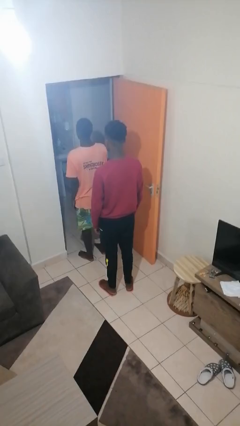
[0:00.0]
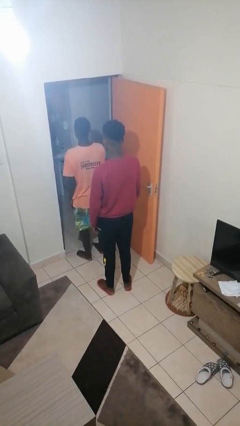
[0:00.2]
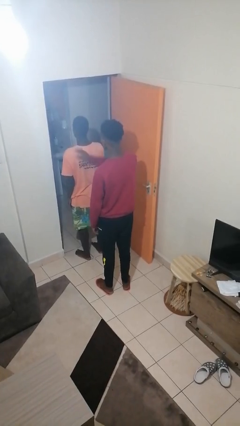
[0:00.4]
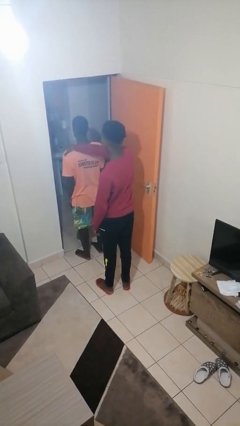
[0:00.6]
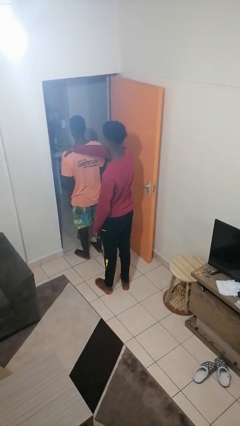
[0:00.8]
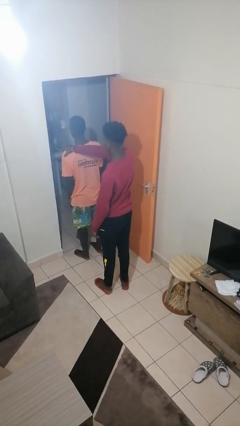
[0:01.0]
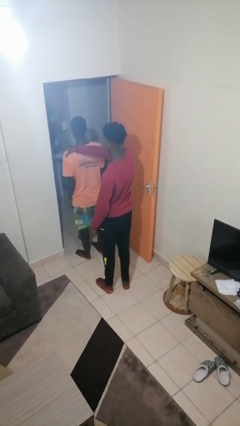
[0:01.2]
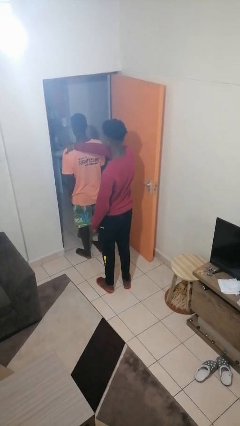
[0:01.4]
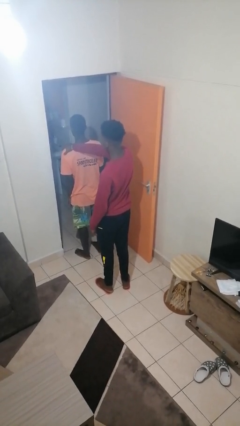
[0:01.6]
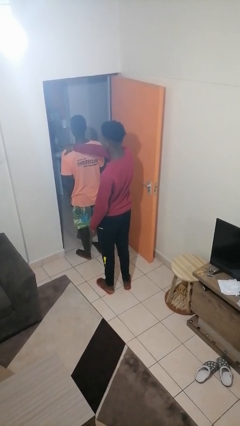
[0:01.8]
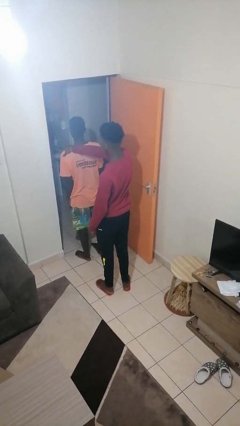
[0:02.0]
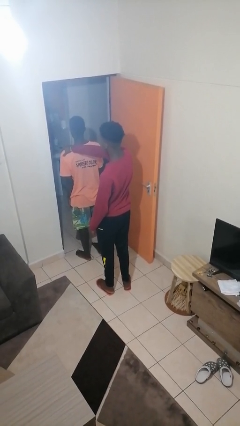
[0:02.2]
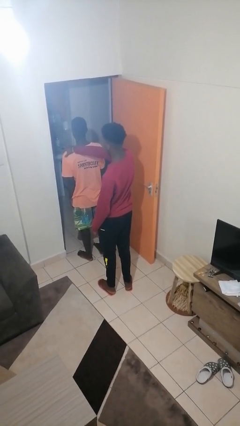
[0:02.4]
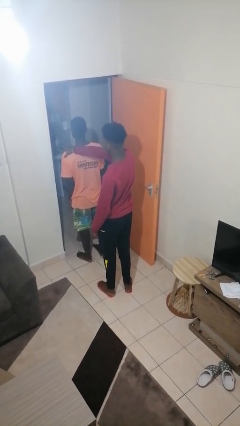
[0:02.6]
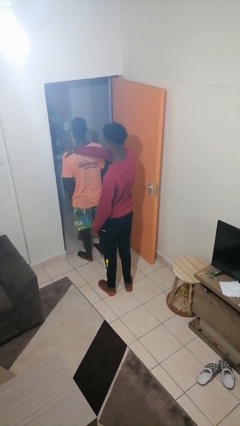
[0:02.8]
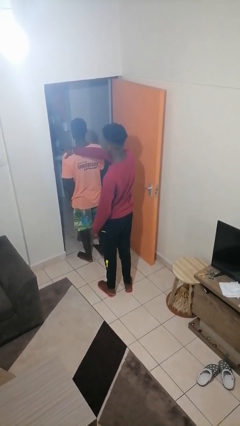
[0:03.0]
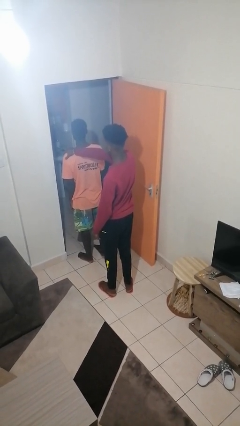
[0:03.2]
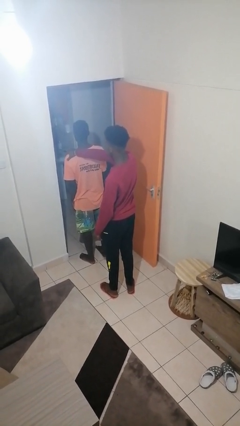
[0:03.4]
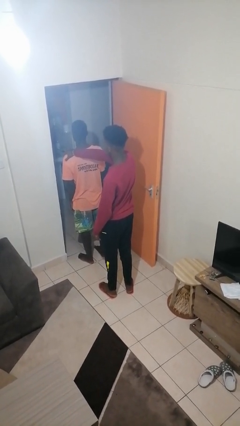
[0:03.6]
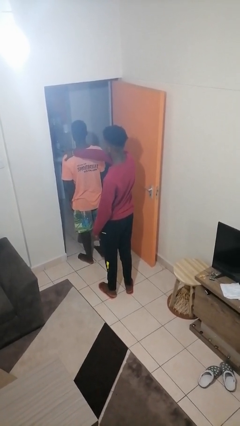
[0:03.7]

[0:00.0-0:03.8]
person grabs person by shoulder

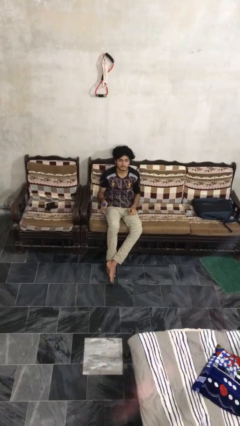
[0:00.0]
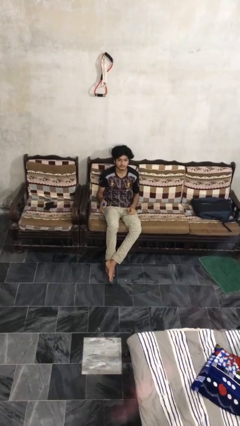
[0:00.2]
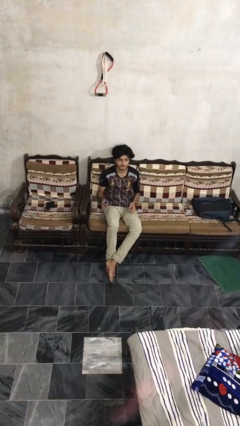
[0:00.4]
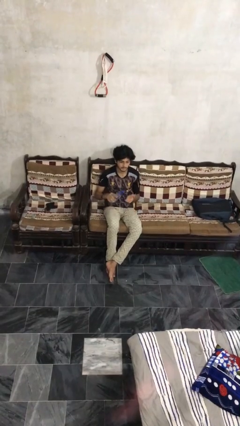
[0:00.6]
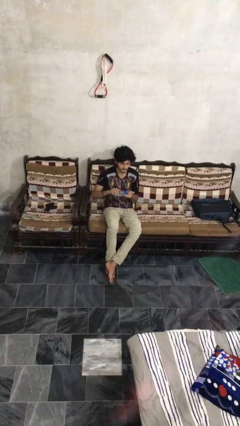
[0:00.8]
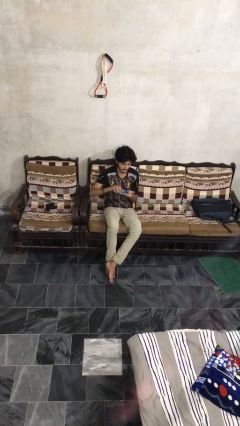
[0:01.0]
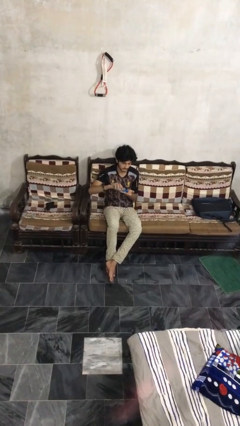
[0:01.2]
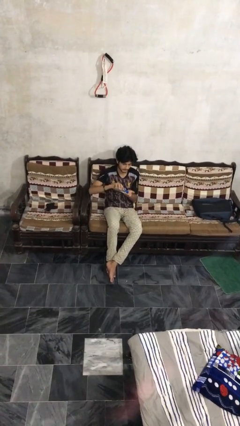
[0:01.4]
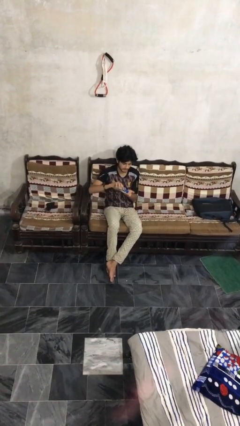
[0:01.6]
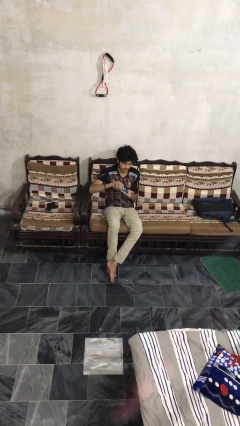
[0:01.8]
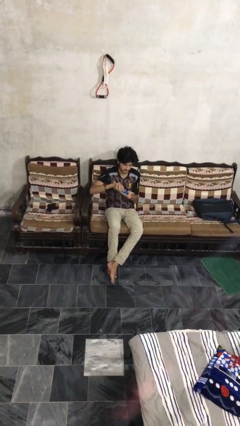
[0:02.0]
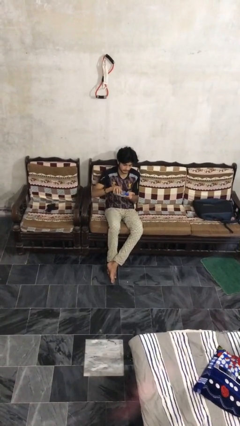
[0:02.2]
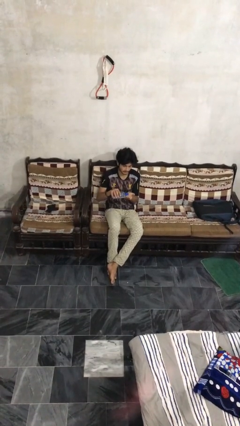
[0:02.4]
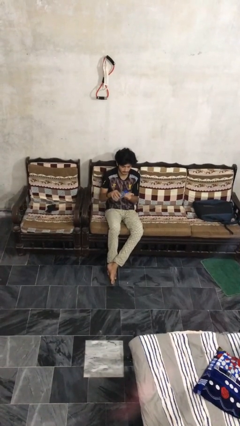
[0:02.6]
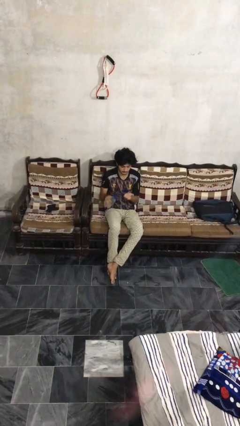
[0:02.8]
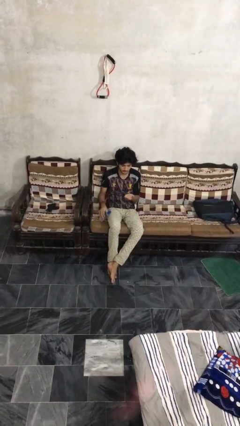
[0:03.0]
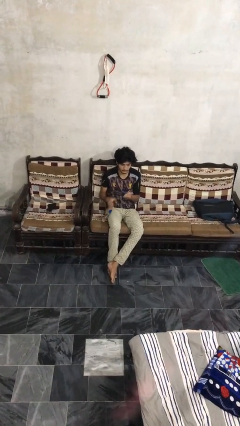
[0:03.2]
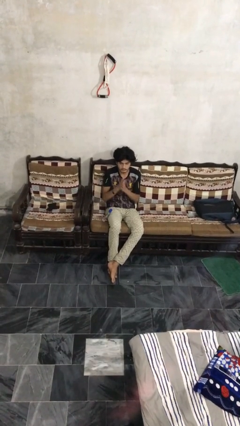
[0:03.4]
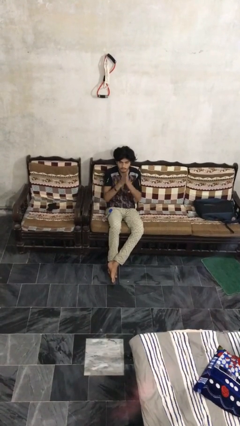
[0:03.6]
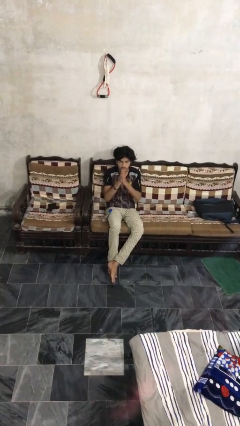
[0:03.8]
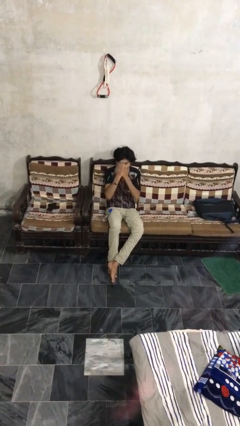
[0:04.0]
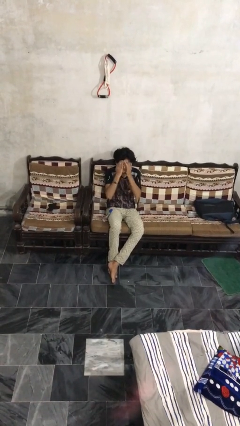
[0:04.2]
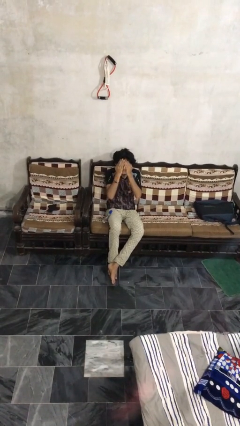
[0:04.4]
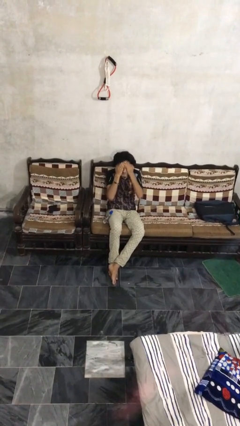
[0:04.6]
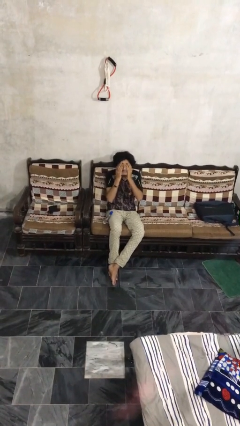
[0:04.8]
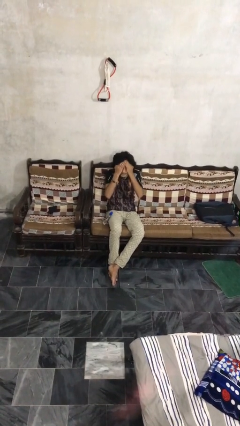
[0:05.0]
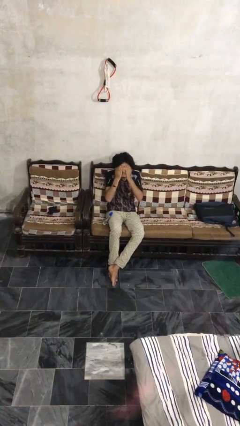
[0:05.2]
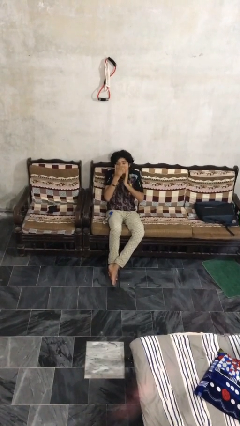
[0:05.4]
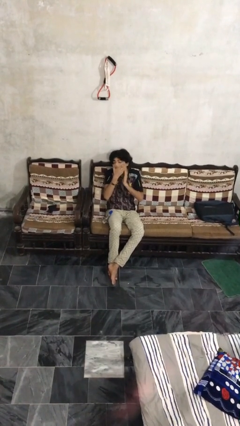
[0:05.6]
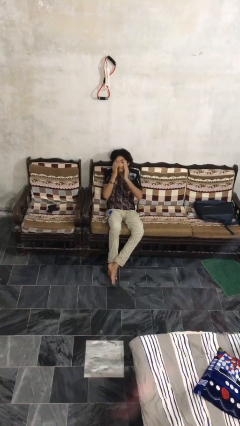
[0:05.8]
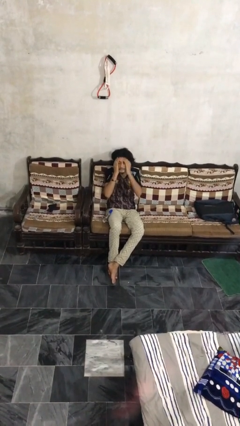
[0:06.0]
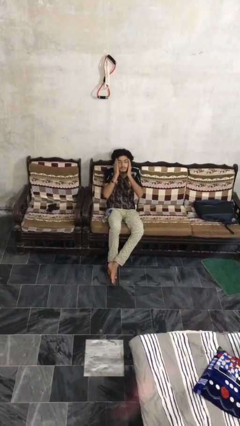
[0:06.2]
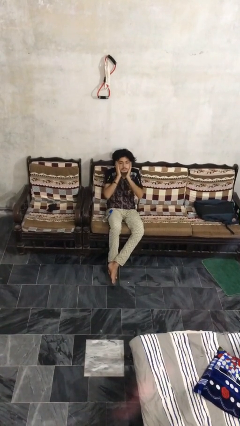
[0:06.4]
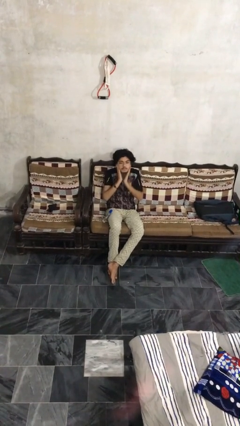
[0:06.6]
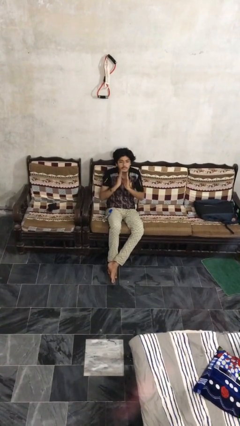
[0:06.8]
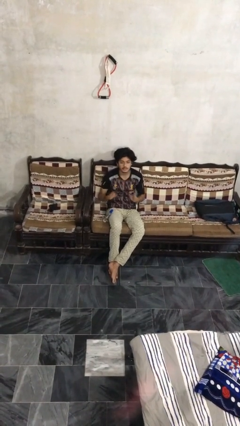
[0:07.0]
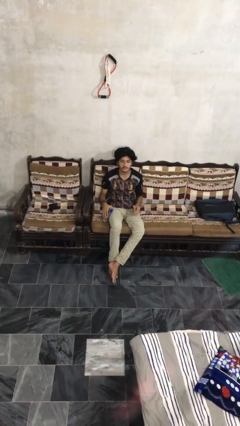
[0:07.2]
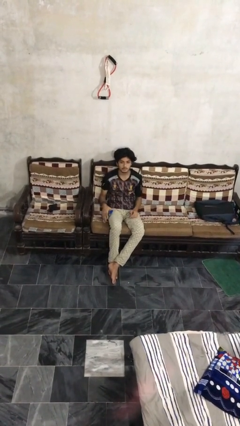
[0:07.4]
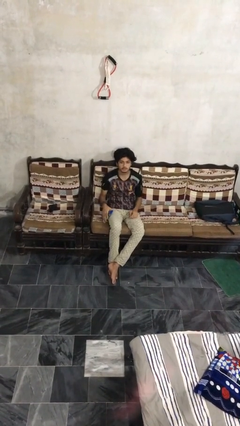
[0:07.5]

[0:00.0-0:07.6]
person applies facial moisturizer

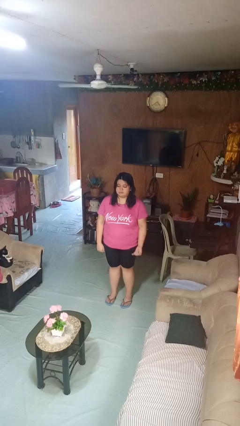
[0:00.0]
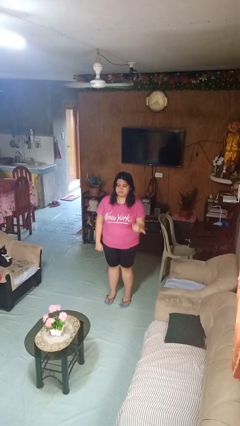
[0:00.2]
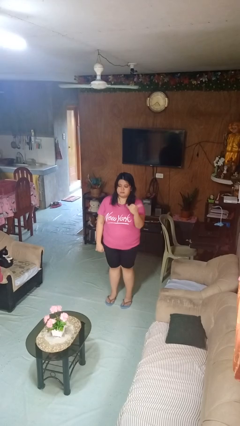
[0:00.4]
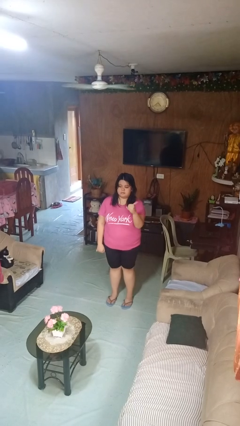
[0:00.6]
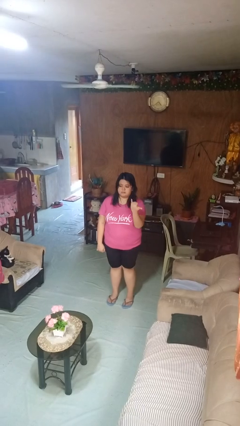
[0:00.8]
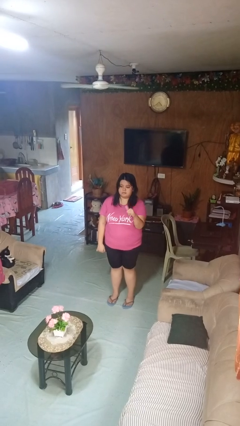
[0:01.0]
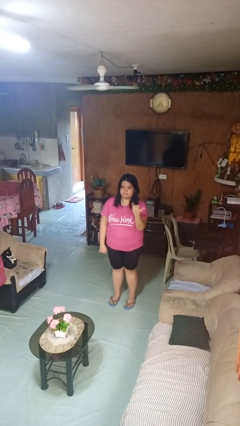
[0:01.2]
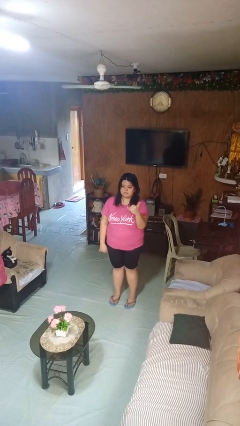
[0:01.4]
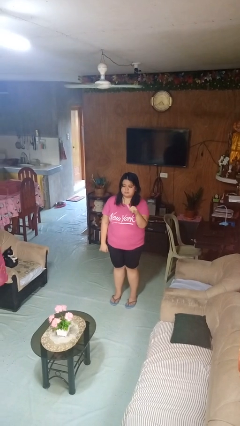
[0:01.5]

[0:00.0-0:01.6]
person gestures hang loose

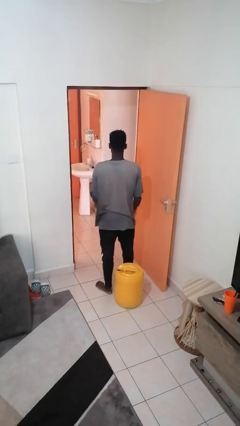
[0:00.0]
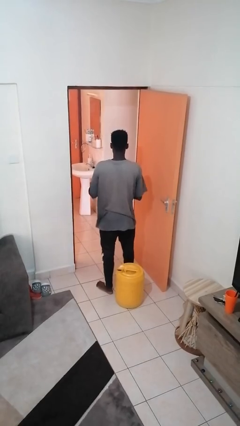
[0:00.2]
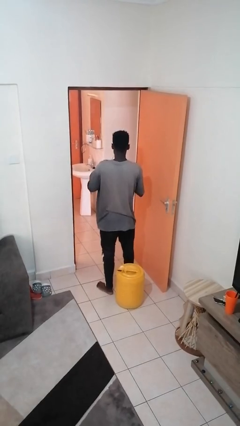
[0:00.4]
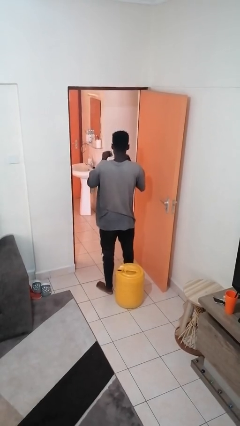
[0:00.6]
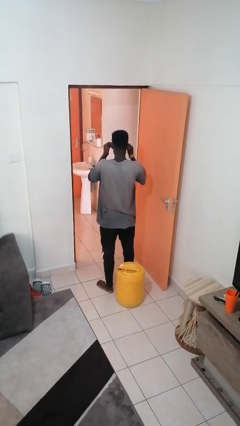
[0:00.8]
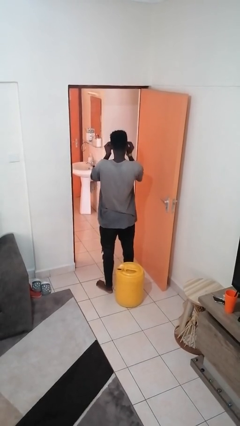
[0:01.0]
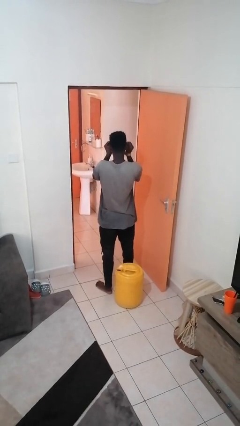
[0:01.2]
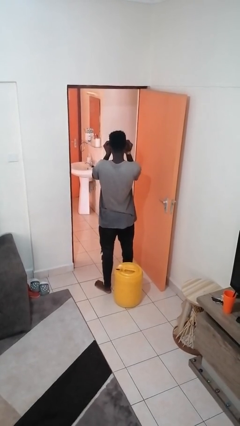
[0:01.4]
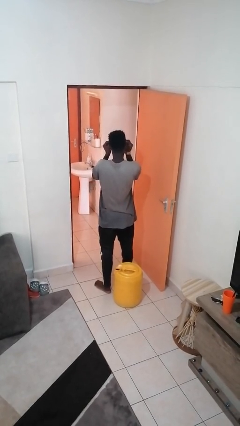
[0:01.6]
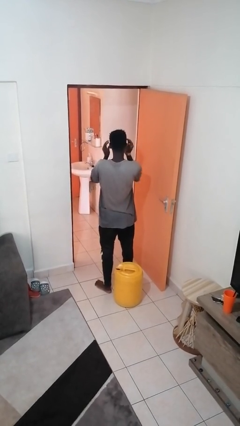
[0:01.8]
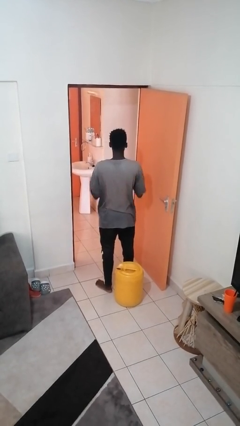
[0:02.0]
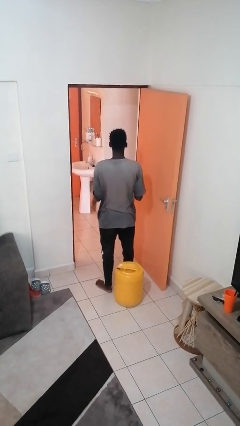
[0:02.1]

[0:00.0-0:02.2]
person puts on glasses

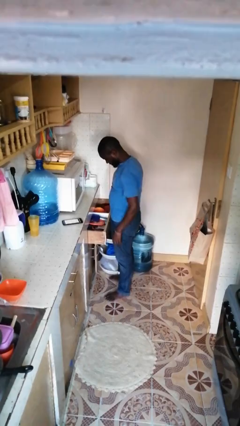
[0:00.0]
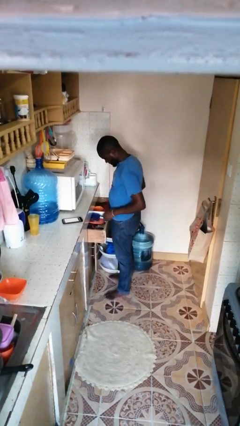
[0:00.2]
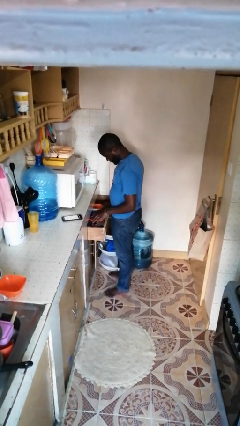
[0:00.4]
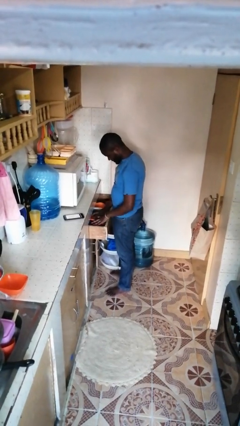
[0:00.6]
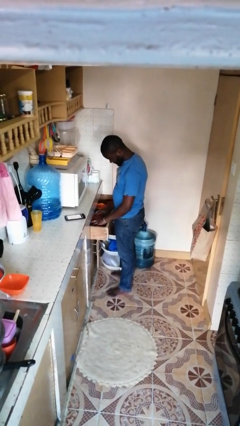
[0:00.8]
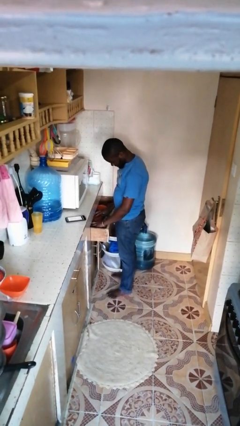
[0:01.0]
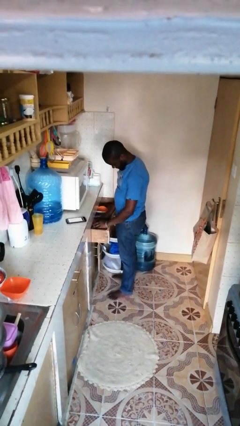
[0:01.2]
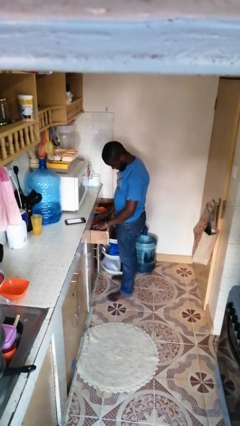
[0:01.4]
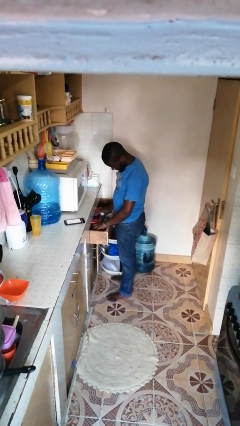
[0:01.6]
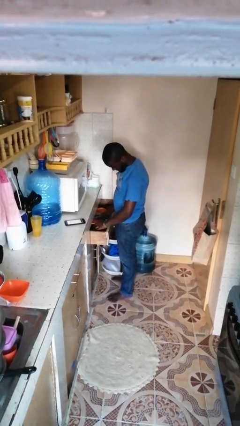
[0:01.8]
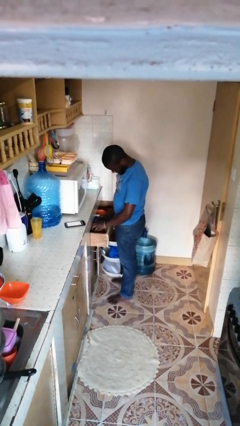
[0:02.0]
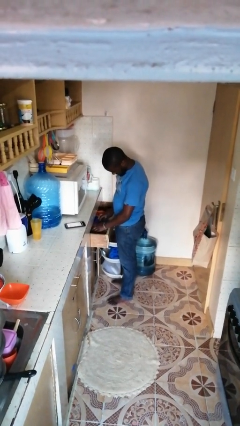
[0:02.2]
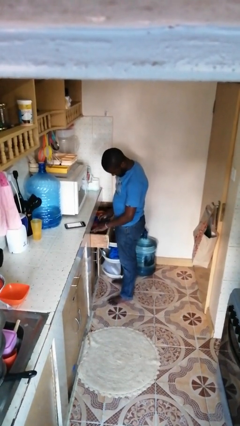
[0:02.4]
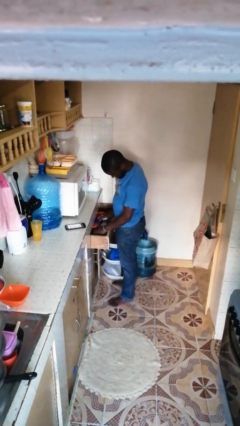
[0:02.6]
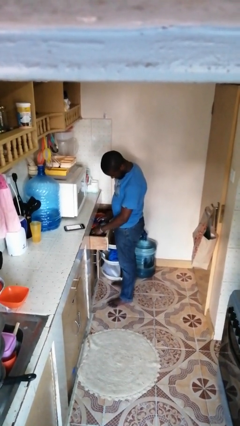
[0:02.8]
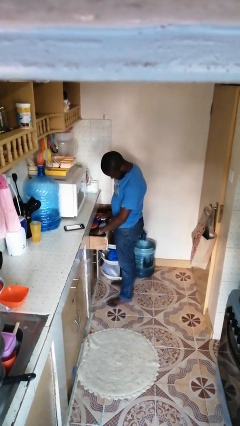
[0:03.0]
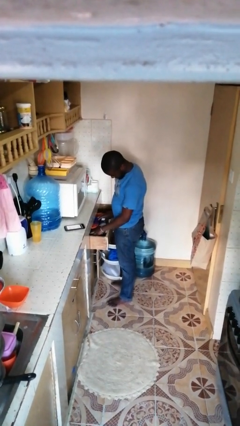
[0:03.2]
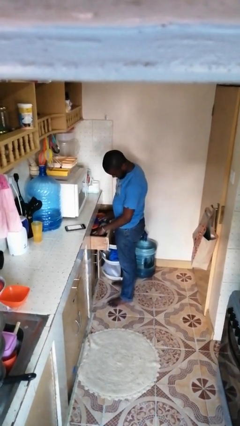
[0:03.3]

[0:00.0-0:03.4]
person searches in kitchen drawer
